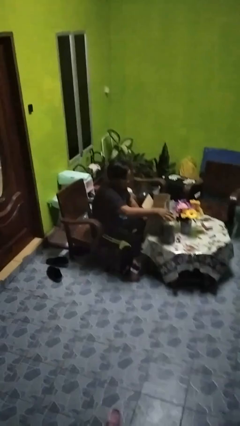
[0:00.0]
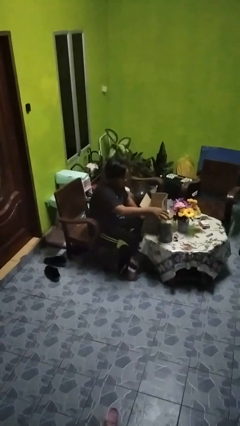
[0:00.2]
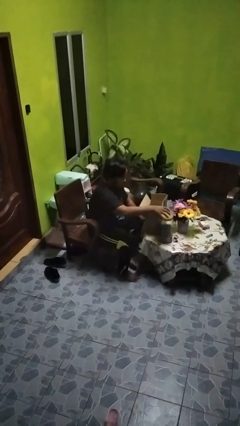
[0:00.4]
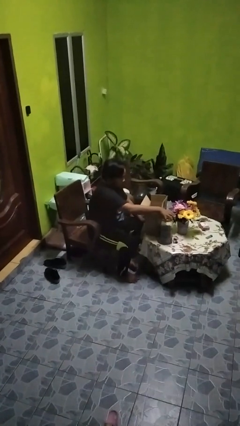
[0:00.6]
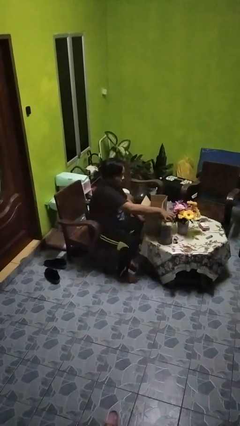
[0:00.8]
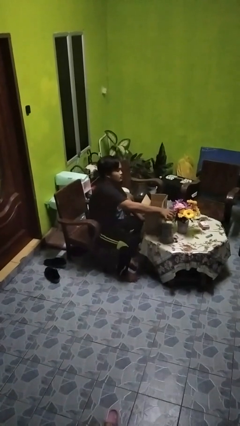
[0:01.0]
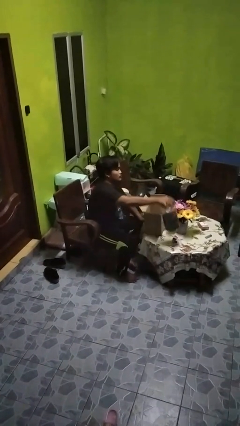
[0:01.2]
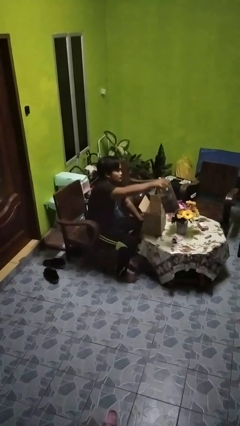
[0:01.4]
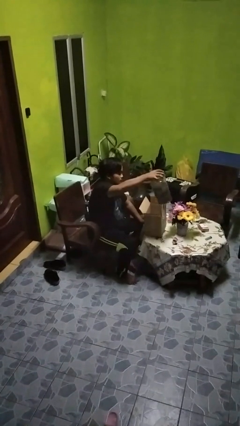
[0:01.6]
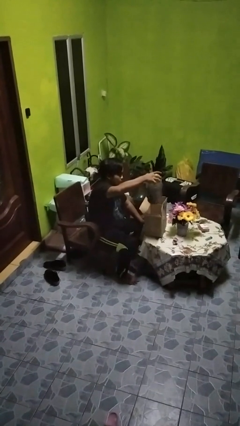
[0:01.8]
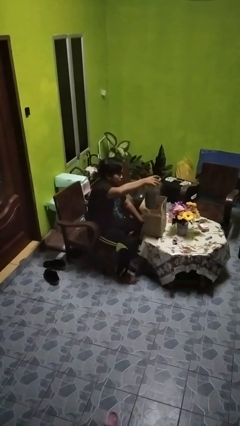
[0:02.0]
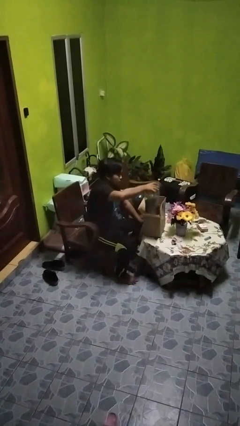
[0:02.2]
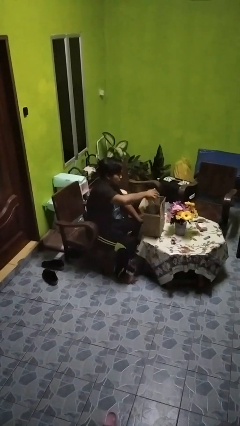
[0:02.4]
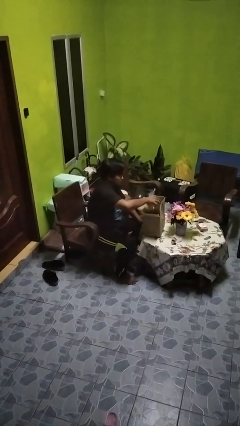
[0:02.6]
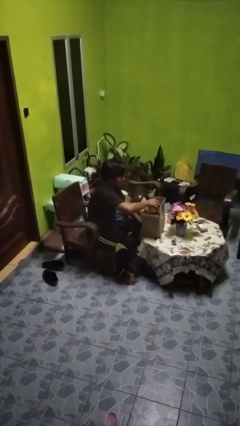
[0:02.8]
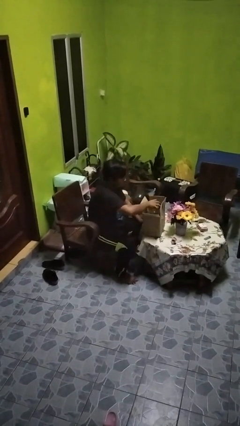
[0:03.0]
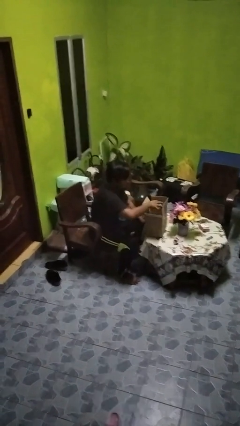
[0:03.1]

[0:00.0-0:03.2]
person puts object into box

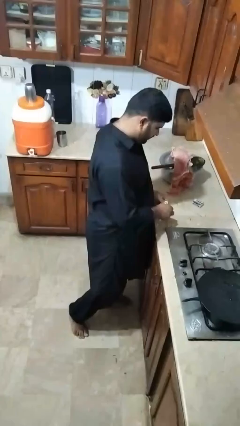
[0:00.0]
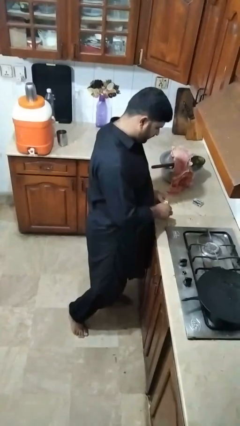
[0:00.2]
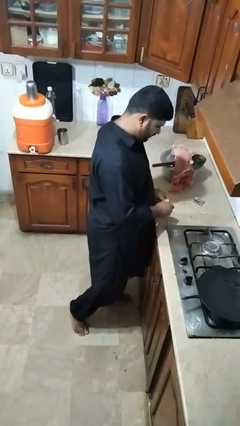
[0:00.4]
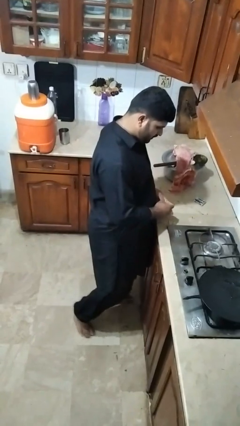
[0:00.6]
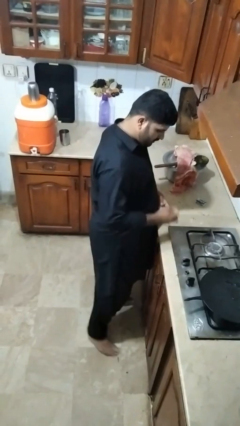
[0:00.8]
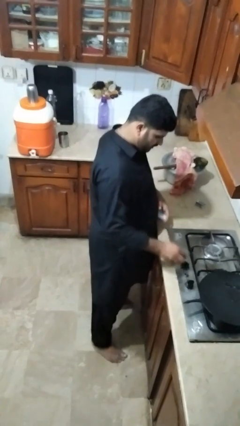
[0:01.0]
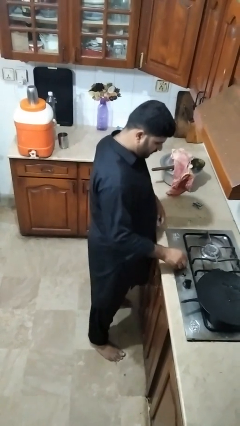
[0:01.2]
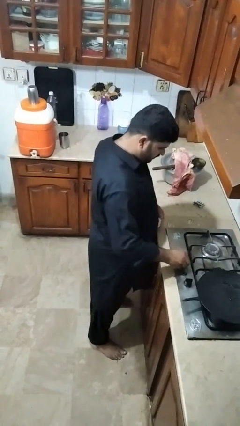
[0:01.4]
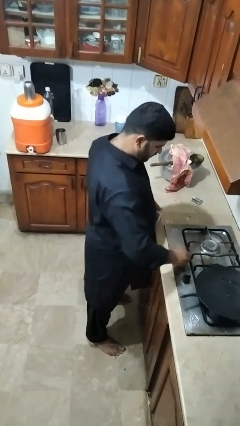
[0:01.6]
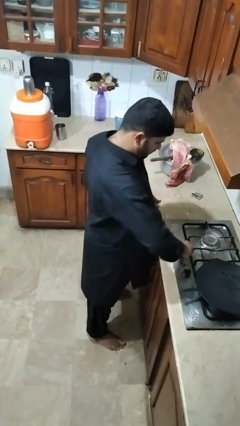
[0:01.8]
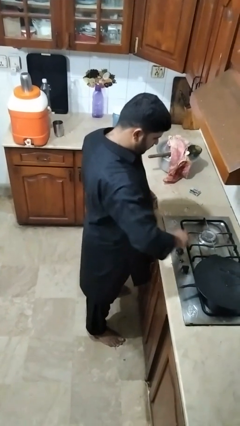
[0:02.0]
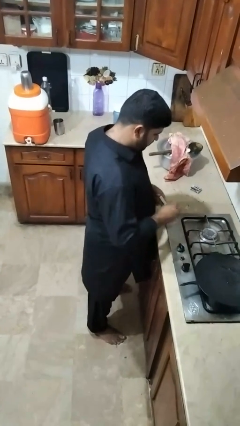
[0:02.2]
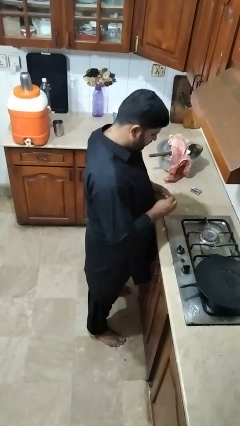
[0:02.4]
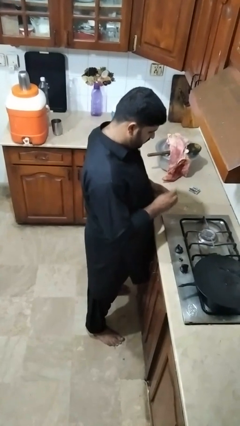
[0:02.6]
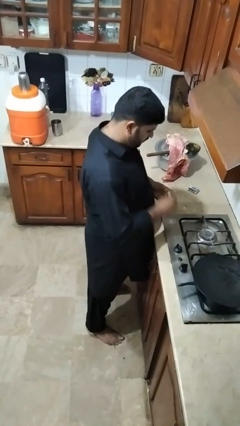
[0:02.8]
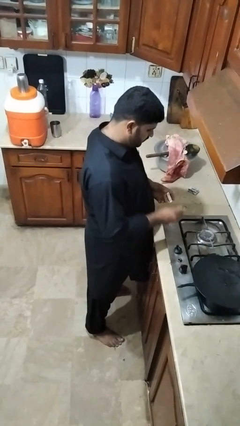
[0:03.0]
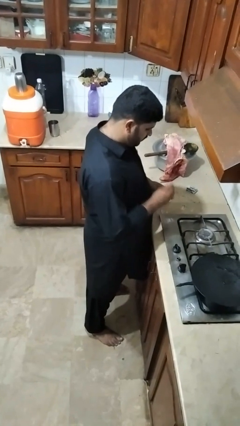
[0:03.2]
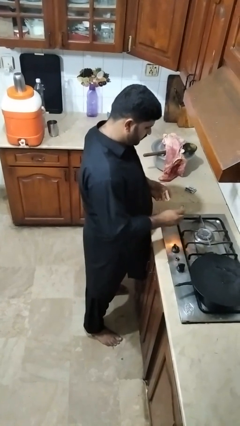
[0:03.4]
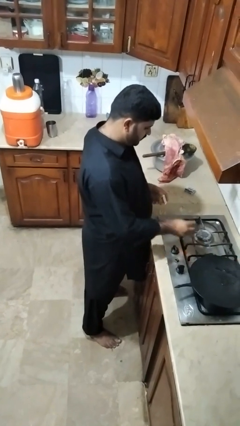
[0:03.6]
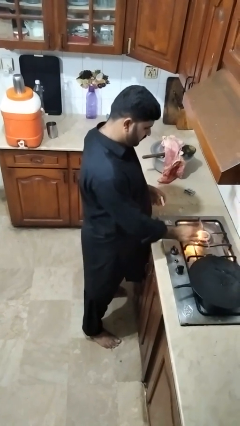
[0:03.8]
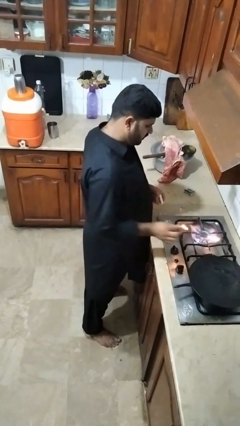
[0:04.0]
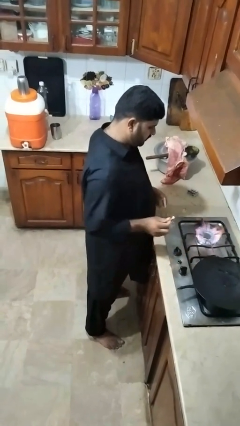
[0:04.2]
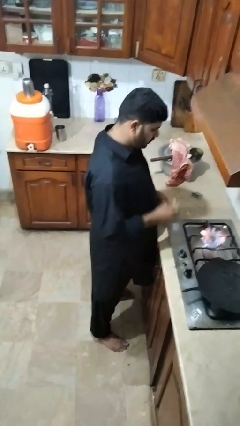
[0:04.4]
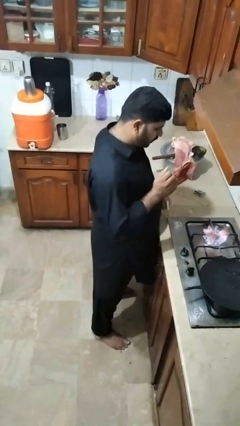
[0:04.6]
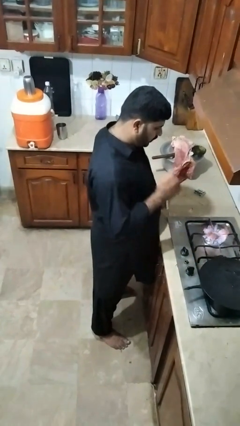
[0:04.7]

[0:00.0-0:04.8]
person turns on stovetop

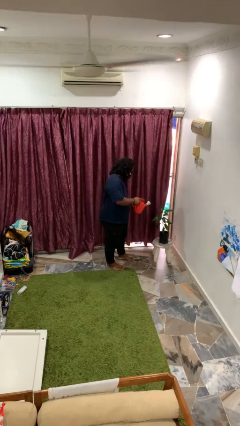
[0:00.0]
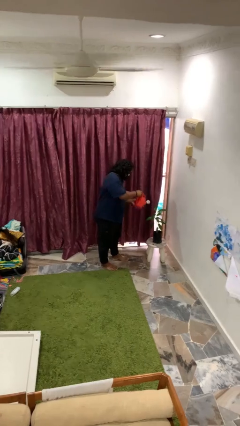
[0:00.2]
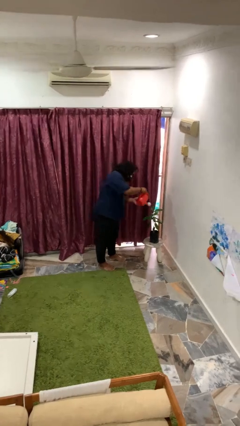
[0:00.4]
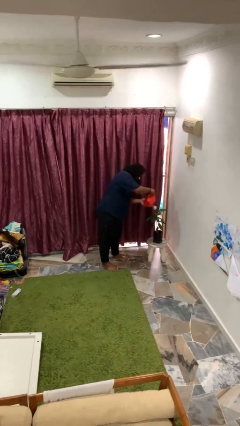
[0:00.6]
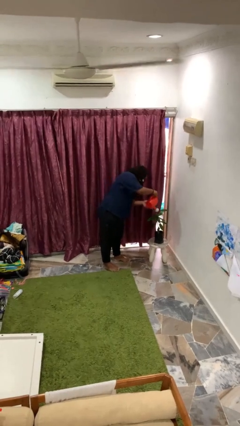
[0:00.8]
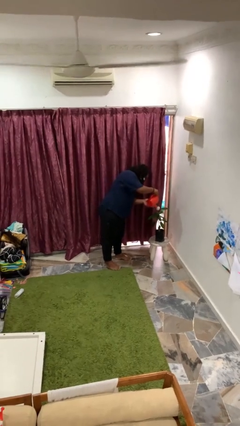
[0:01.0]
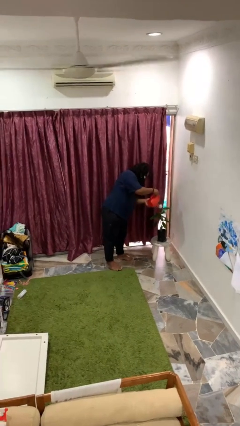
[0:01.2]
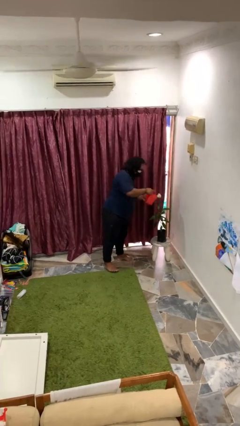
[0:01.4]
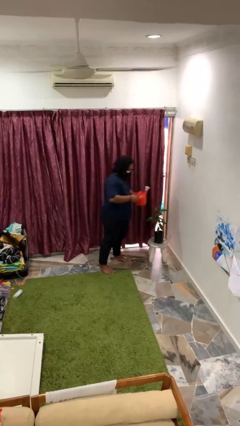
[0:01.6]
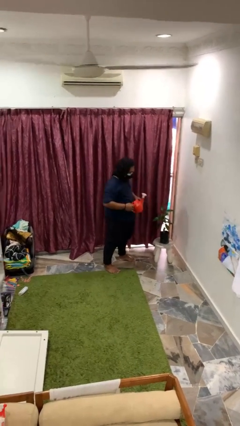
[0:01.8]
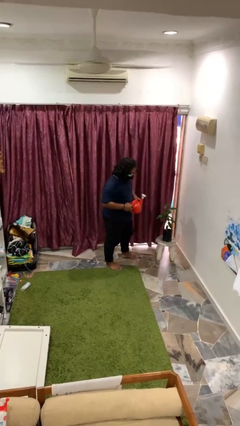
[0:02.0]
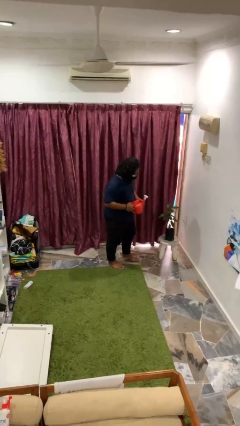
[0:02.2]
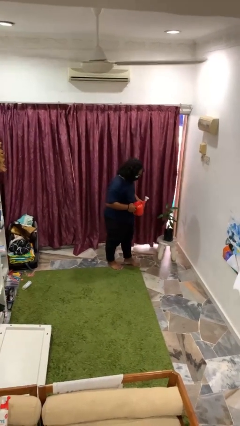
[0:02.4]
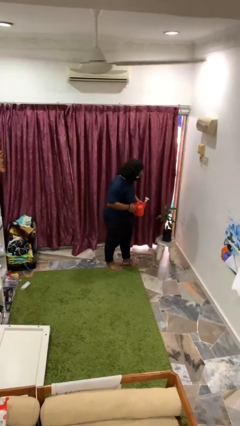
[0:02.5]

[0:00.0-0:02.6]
person waters houseplant

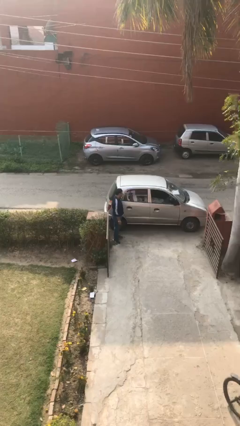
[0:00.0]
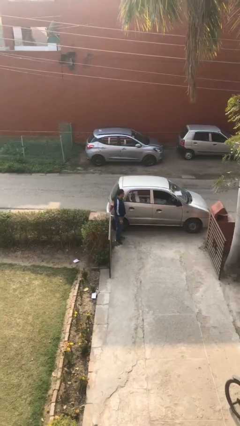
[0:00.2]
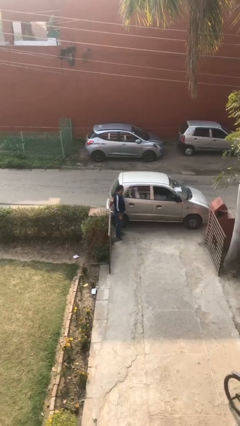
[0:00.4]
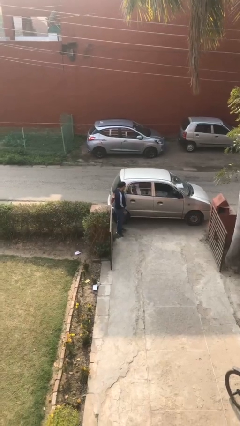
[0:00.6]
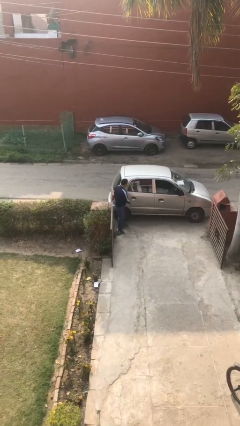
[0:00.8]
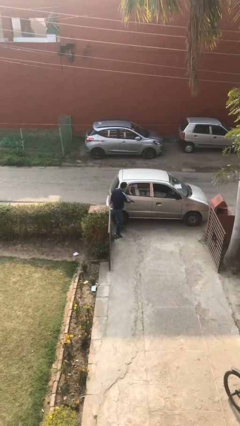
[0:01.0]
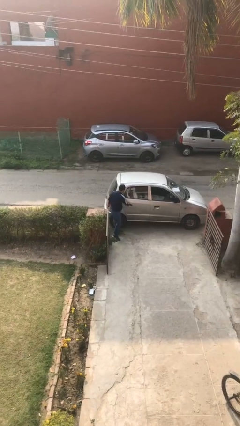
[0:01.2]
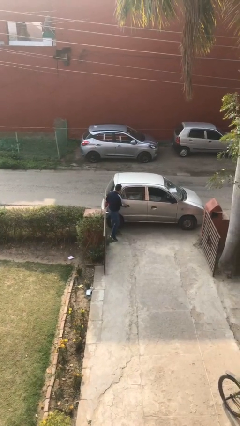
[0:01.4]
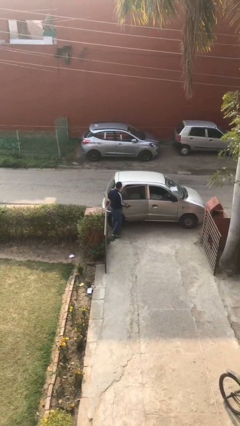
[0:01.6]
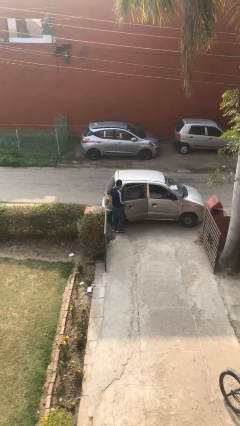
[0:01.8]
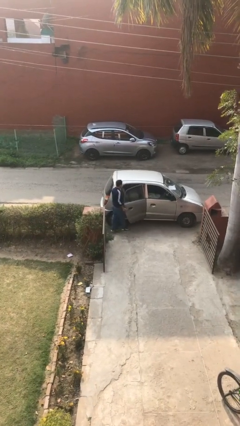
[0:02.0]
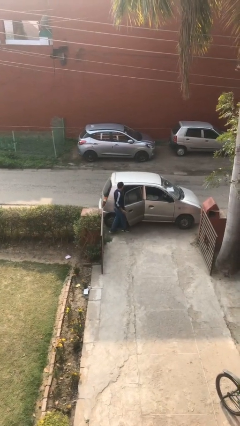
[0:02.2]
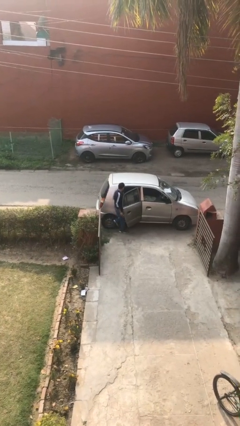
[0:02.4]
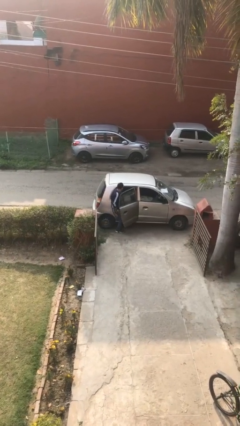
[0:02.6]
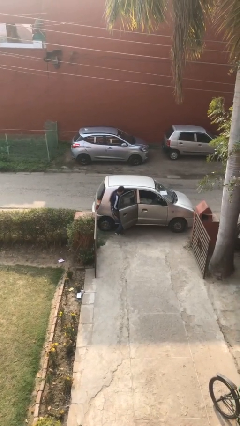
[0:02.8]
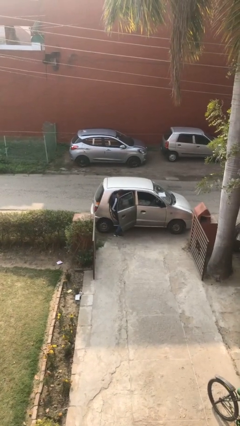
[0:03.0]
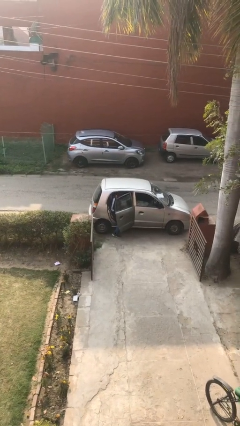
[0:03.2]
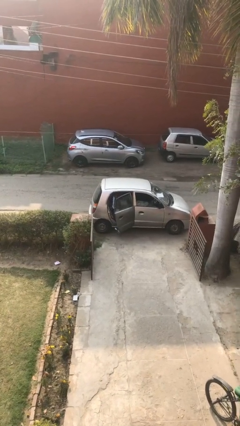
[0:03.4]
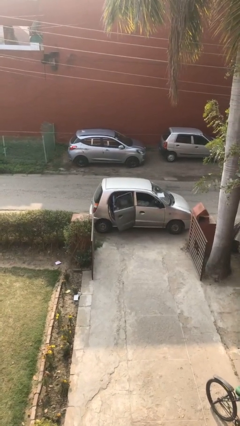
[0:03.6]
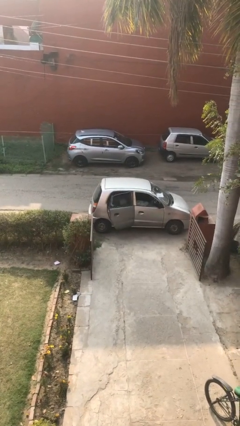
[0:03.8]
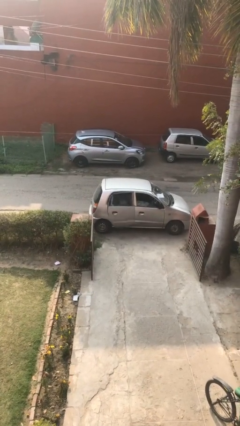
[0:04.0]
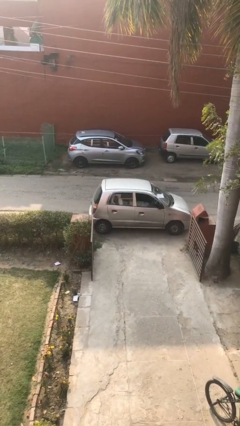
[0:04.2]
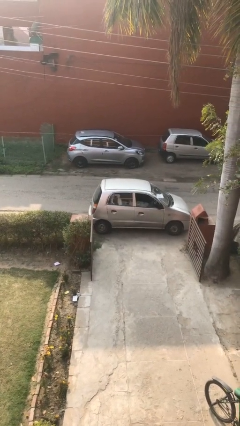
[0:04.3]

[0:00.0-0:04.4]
person enters car

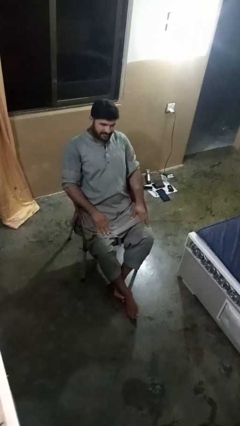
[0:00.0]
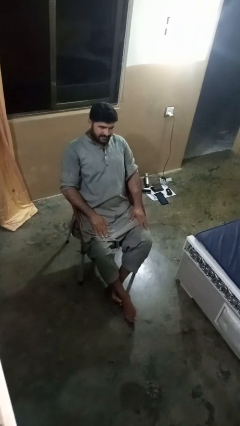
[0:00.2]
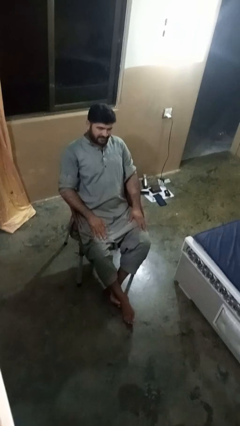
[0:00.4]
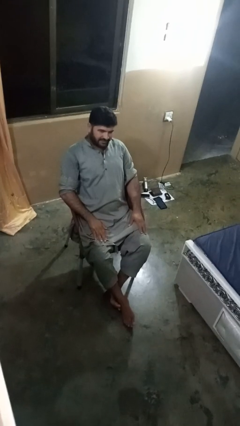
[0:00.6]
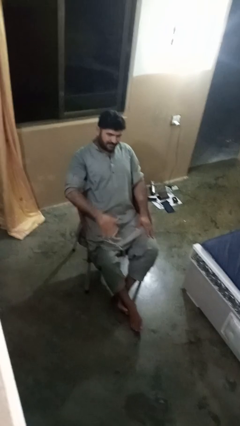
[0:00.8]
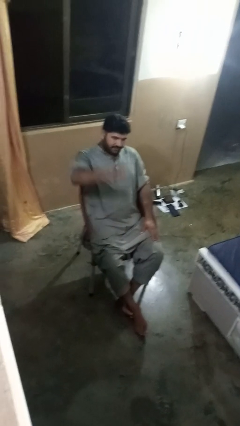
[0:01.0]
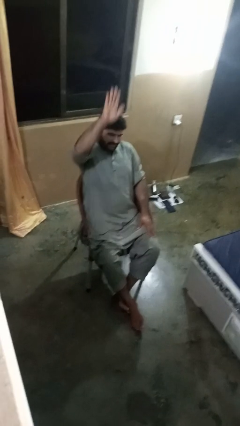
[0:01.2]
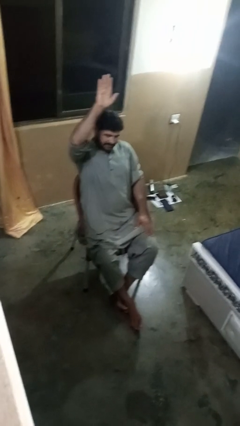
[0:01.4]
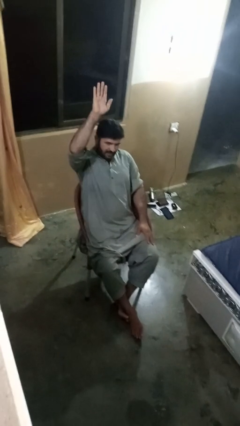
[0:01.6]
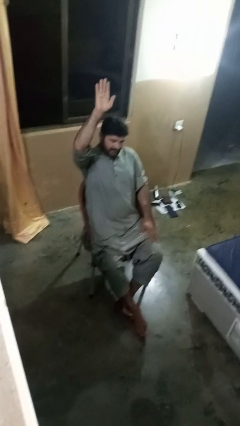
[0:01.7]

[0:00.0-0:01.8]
person gestures number five

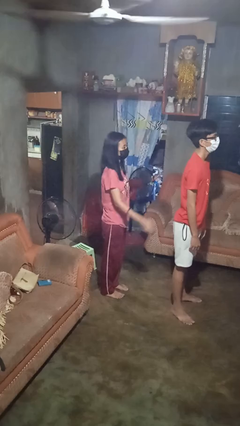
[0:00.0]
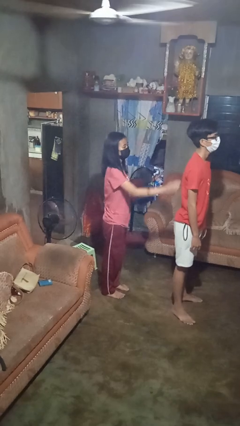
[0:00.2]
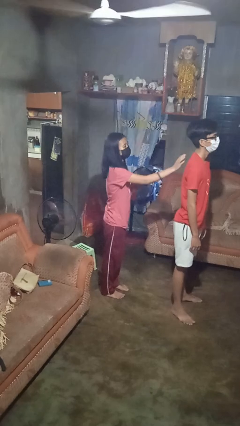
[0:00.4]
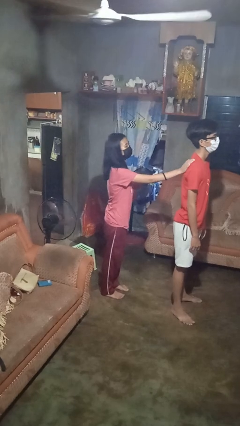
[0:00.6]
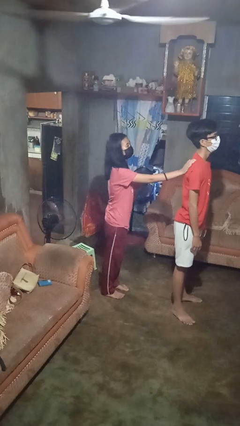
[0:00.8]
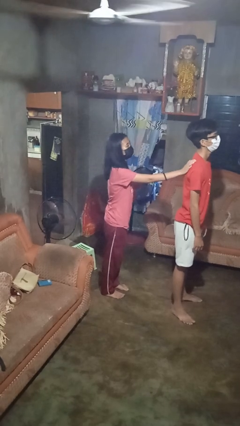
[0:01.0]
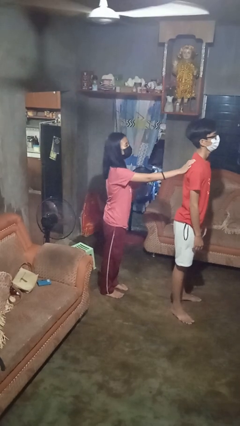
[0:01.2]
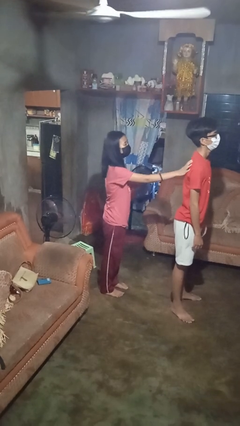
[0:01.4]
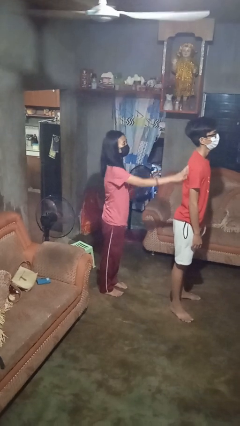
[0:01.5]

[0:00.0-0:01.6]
person touches back of person
